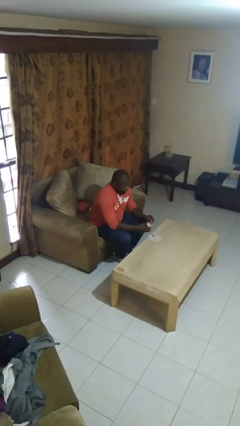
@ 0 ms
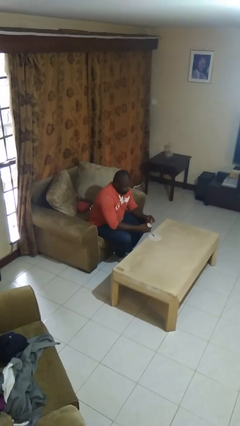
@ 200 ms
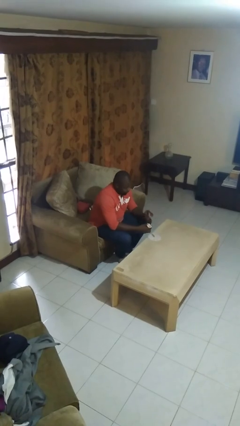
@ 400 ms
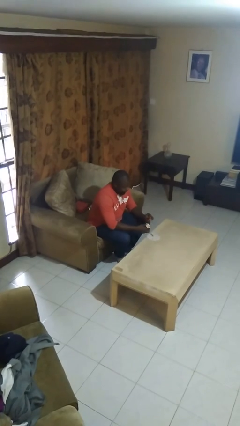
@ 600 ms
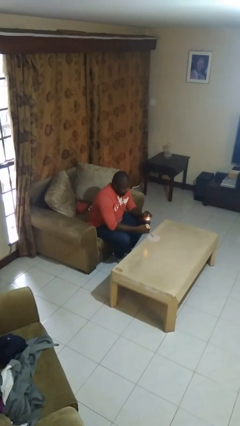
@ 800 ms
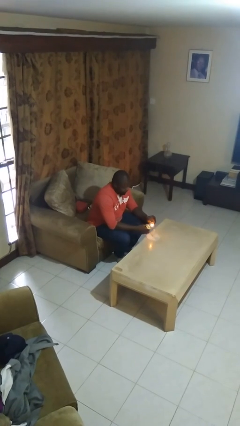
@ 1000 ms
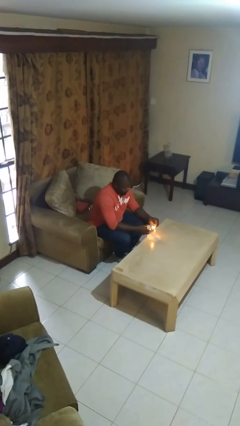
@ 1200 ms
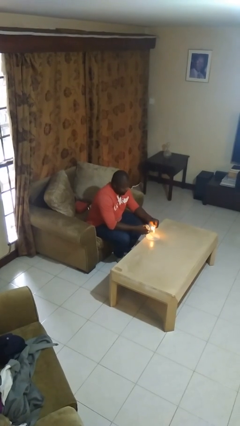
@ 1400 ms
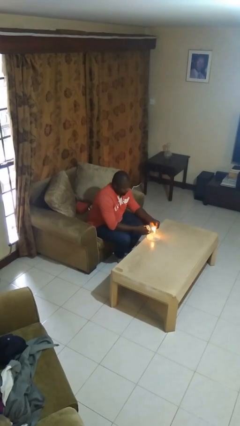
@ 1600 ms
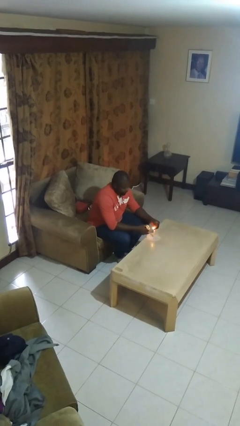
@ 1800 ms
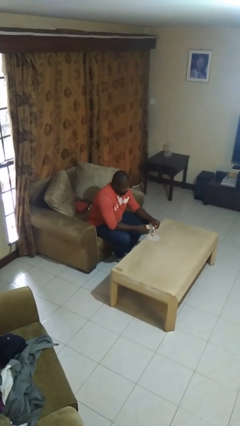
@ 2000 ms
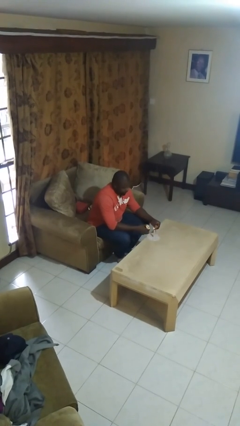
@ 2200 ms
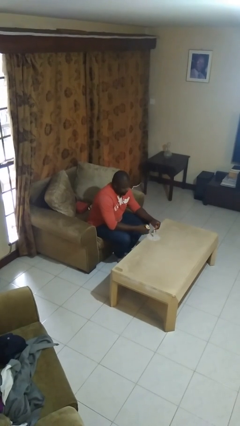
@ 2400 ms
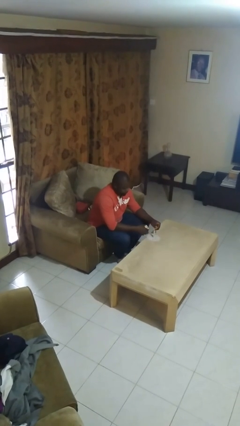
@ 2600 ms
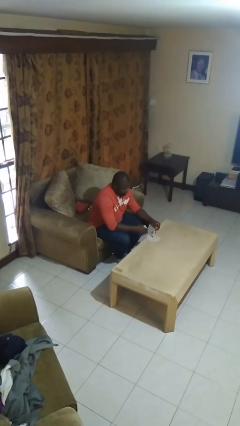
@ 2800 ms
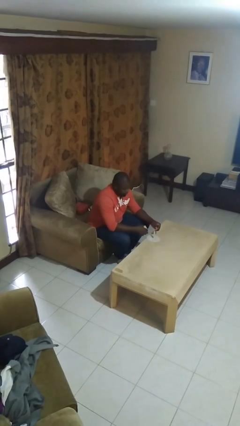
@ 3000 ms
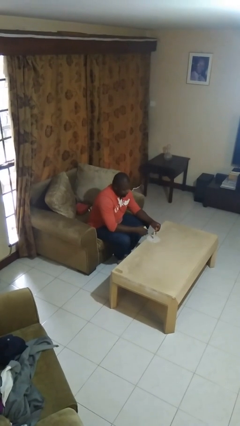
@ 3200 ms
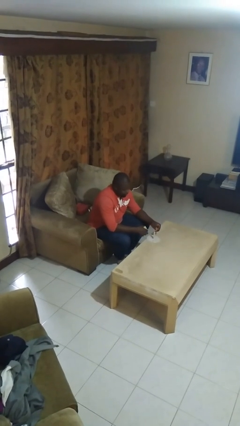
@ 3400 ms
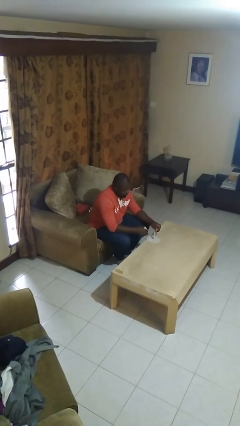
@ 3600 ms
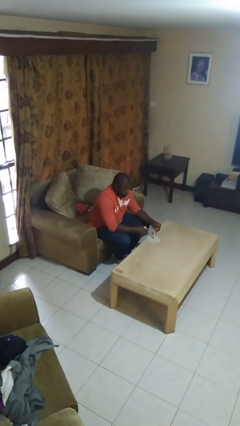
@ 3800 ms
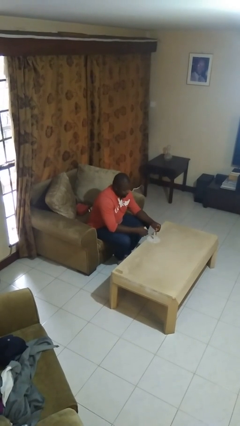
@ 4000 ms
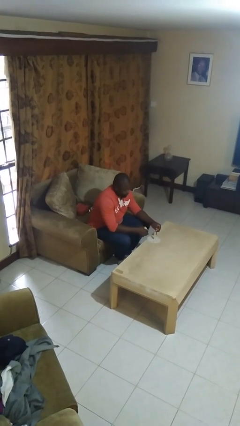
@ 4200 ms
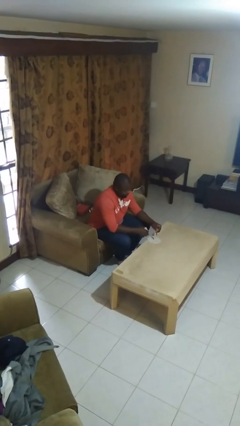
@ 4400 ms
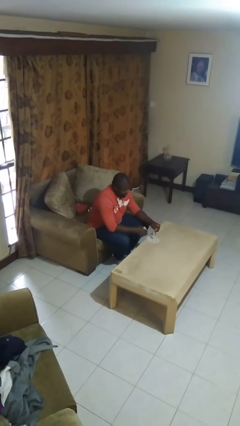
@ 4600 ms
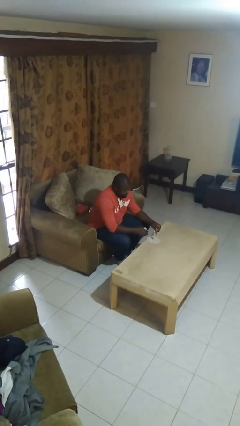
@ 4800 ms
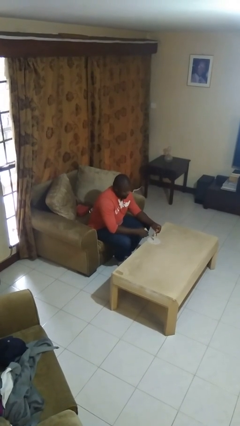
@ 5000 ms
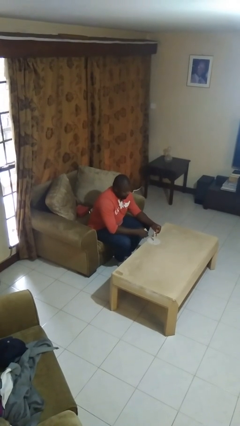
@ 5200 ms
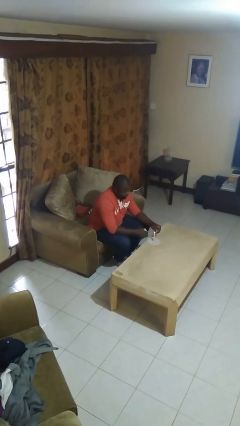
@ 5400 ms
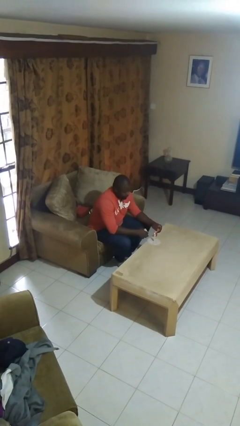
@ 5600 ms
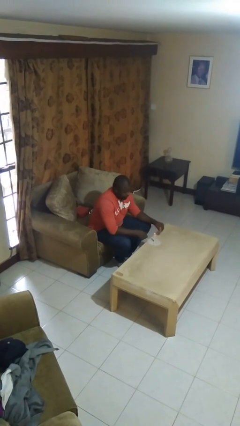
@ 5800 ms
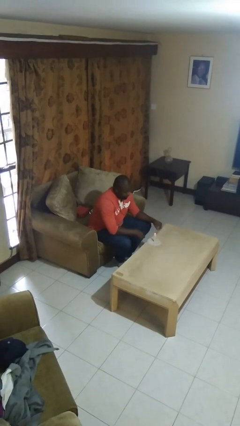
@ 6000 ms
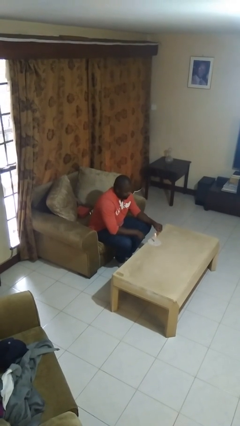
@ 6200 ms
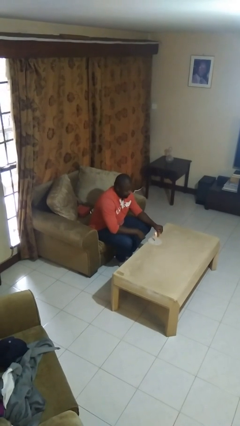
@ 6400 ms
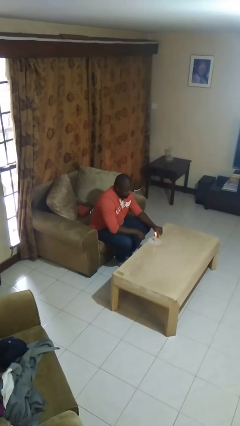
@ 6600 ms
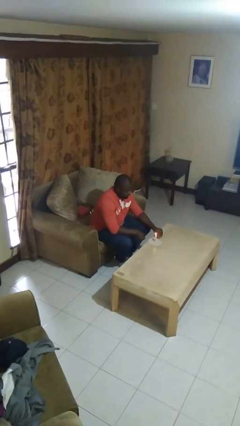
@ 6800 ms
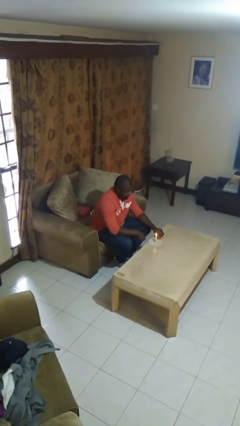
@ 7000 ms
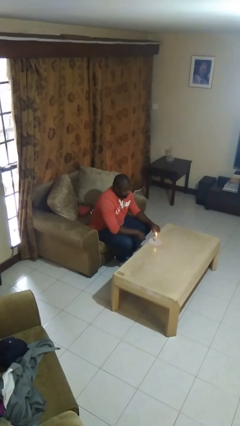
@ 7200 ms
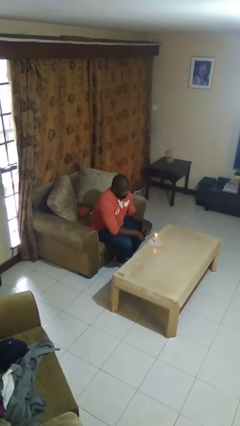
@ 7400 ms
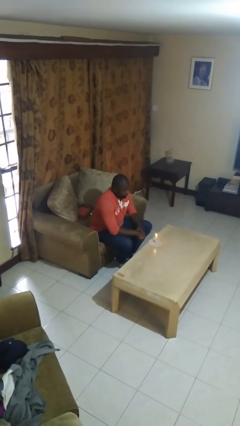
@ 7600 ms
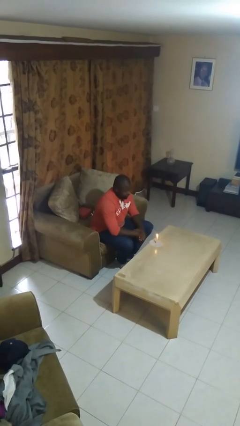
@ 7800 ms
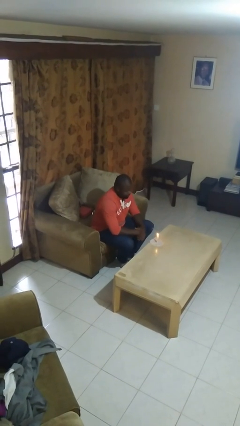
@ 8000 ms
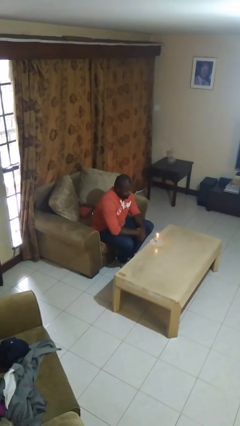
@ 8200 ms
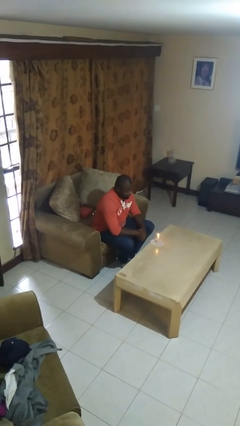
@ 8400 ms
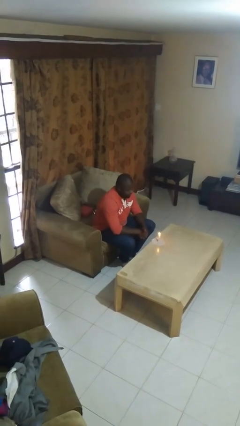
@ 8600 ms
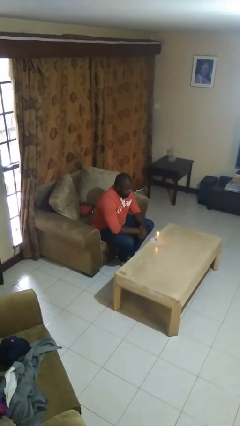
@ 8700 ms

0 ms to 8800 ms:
person lights candle

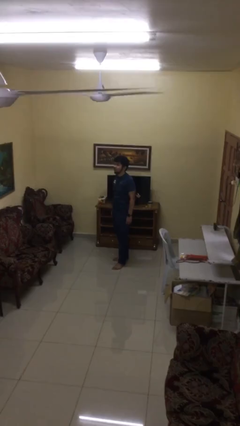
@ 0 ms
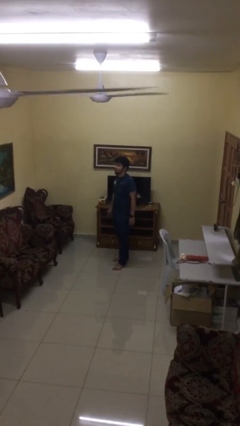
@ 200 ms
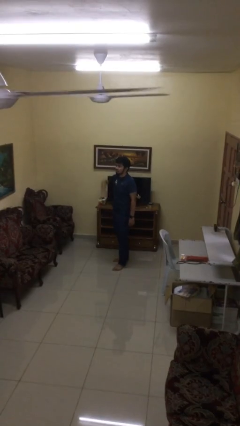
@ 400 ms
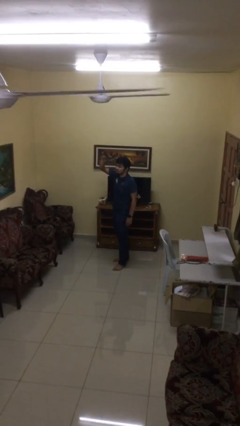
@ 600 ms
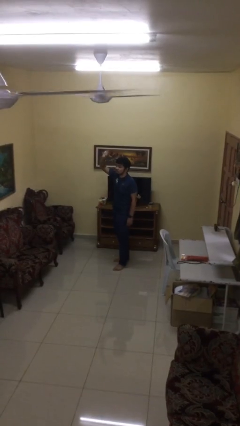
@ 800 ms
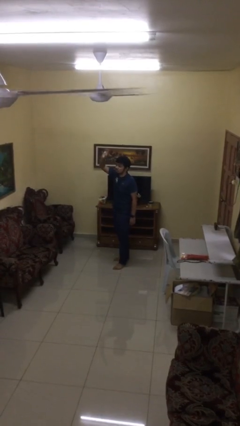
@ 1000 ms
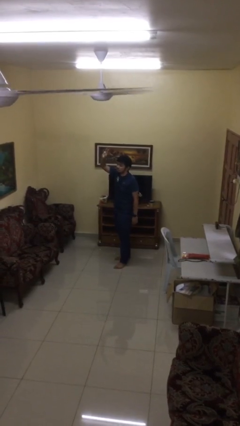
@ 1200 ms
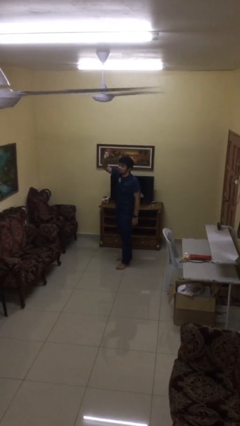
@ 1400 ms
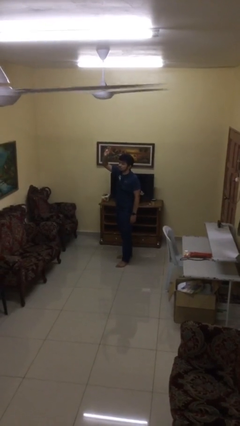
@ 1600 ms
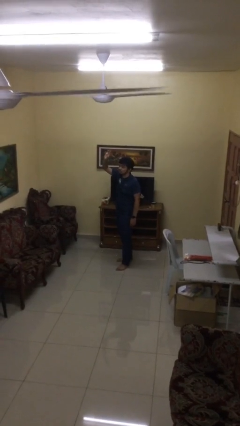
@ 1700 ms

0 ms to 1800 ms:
person gestures swipe up

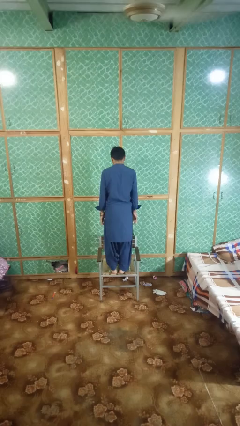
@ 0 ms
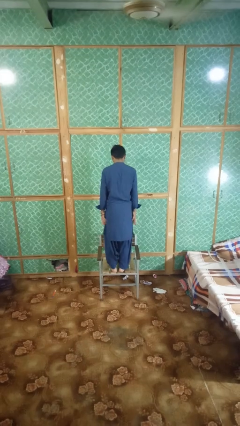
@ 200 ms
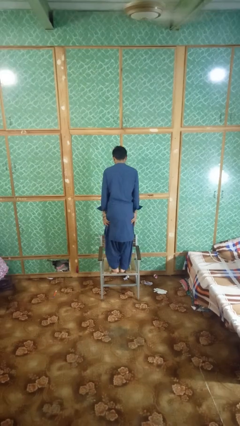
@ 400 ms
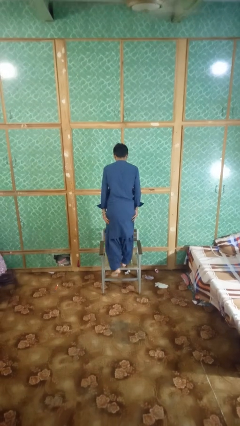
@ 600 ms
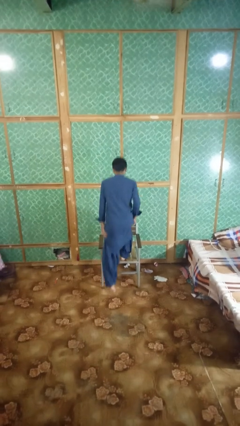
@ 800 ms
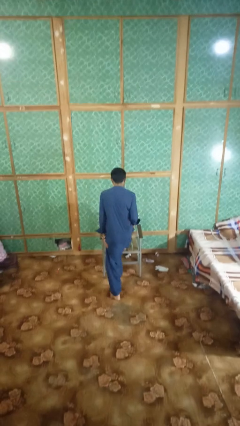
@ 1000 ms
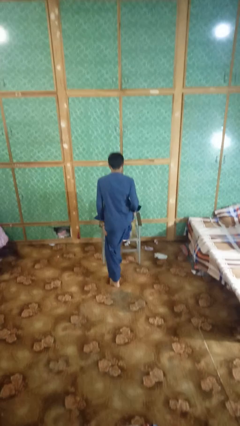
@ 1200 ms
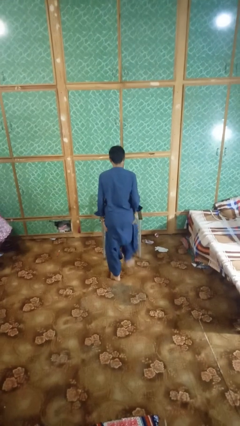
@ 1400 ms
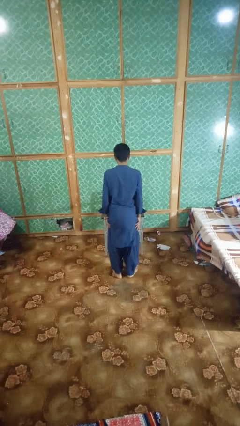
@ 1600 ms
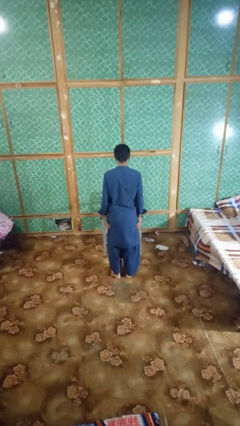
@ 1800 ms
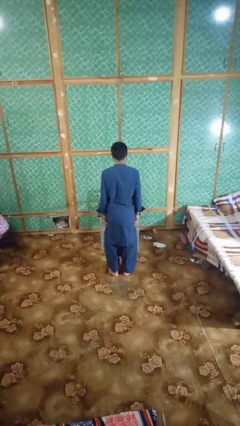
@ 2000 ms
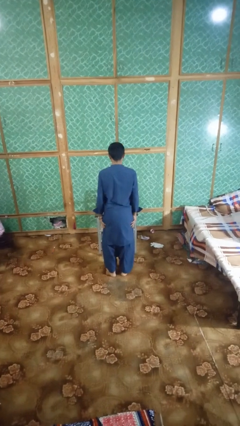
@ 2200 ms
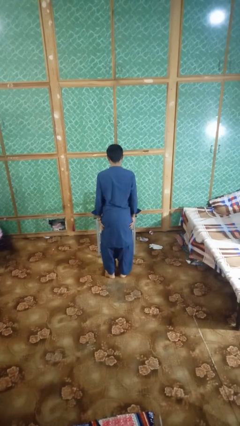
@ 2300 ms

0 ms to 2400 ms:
person climbs off chair

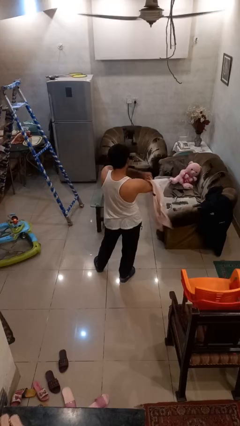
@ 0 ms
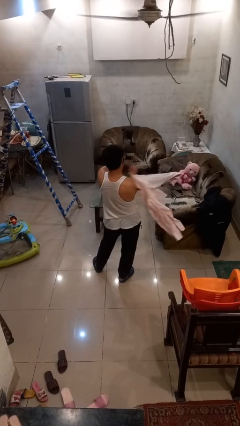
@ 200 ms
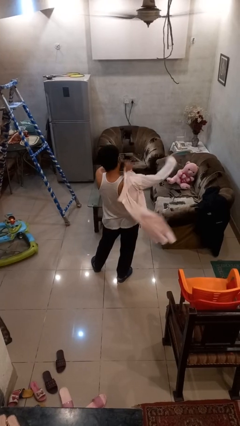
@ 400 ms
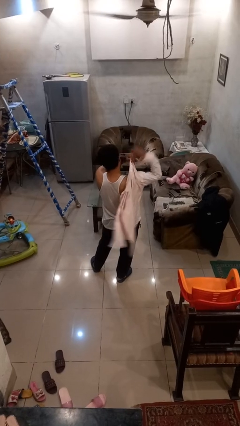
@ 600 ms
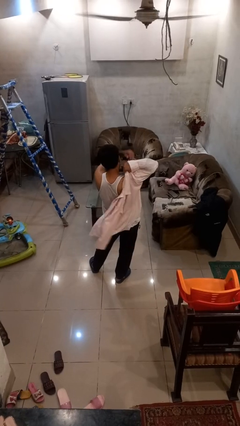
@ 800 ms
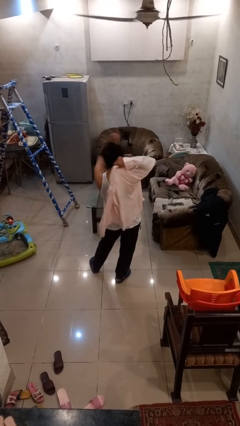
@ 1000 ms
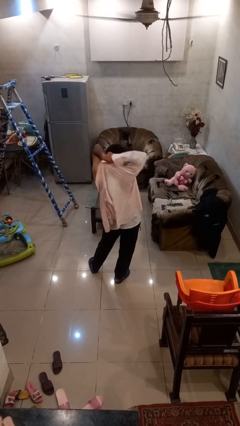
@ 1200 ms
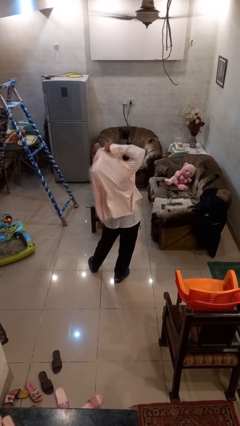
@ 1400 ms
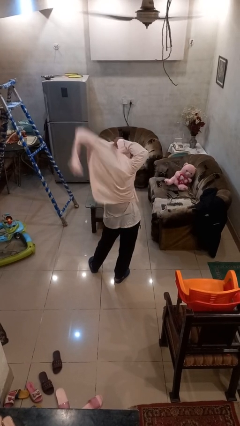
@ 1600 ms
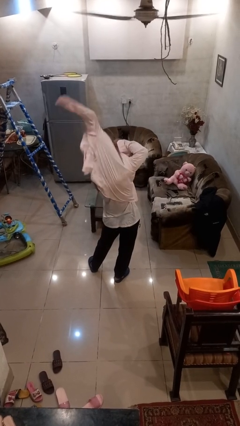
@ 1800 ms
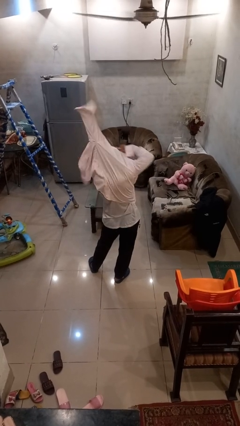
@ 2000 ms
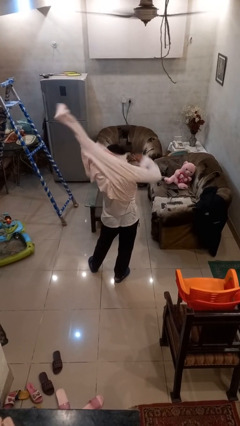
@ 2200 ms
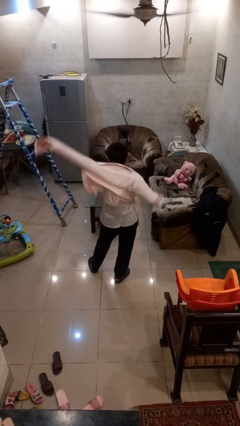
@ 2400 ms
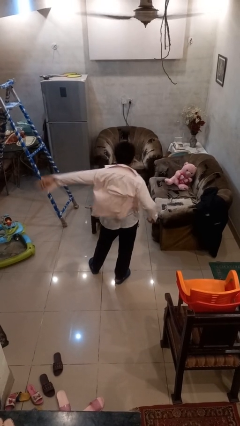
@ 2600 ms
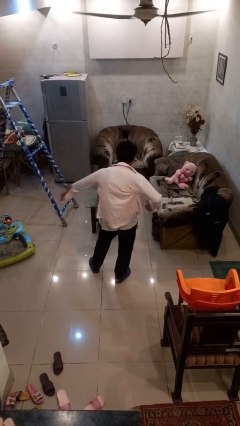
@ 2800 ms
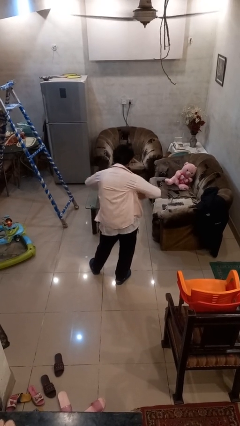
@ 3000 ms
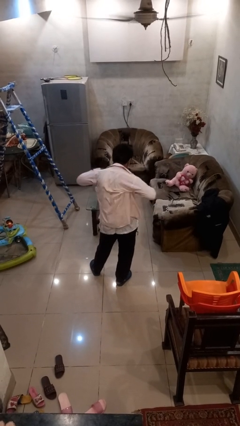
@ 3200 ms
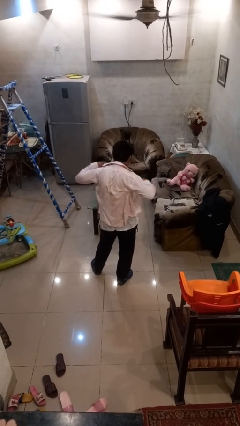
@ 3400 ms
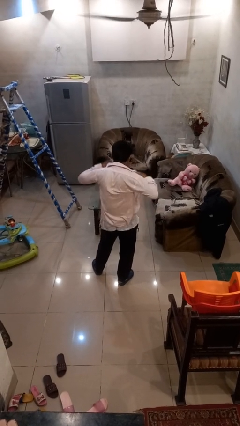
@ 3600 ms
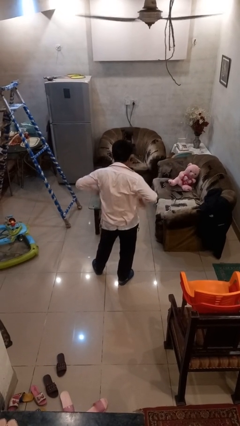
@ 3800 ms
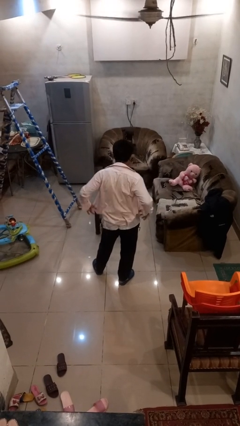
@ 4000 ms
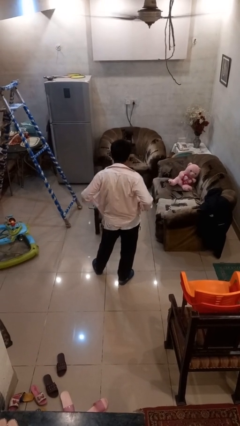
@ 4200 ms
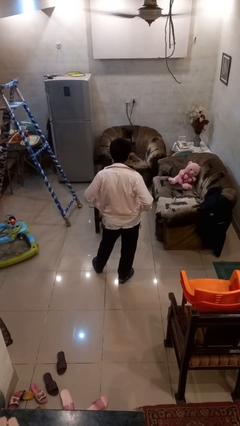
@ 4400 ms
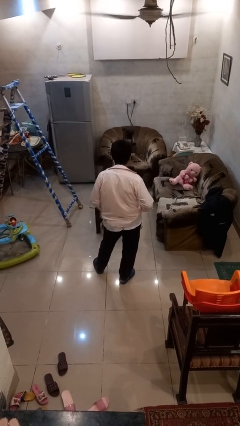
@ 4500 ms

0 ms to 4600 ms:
person puts on shirt
